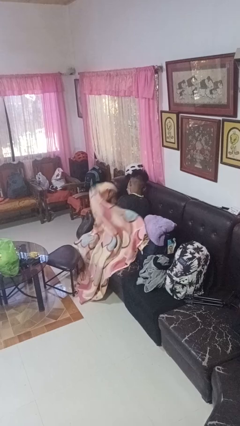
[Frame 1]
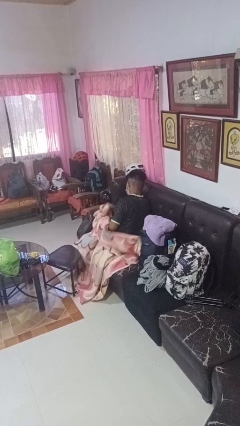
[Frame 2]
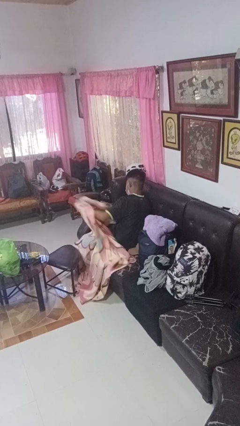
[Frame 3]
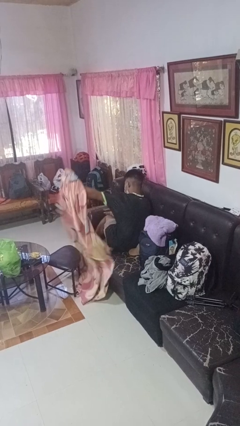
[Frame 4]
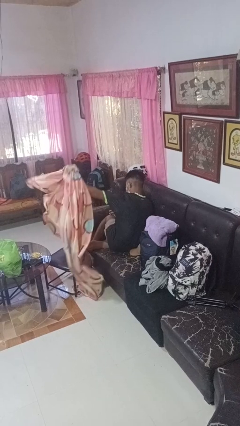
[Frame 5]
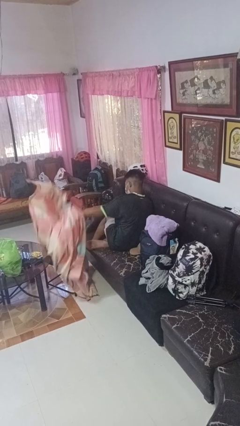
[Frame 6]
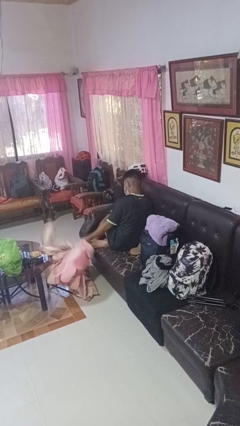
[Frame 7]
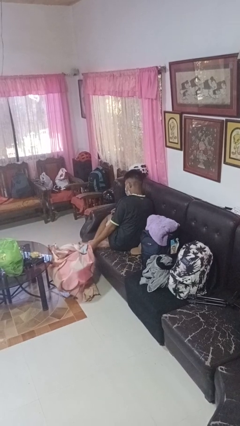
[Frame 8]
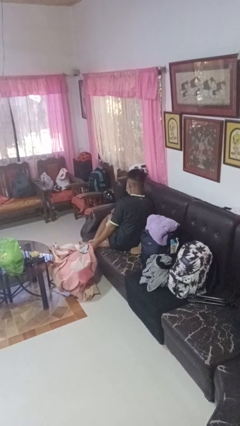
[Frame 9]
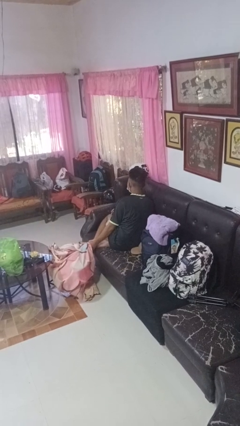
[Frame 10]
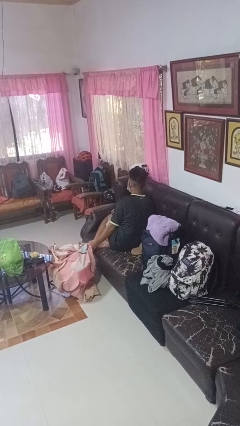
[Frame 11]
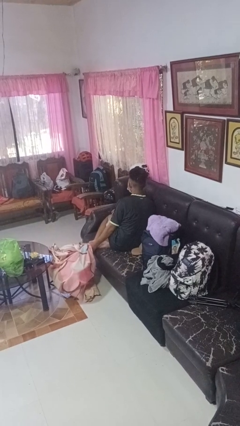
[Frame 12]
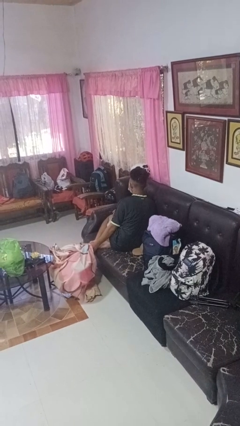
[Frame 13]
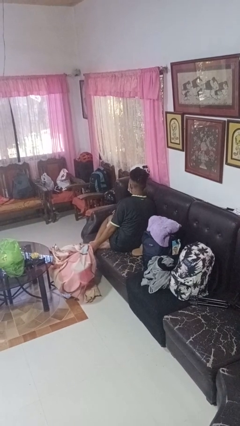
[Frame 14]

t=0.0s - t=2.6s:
person uncovers with blanket

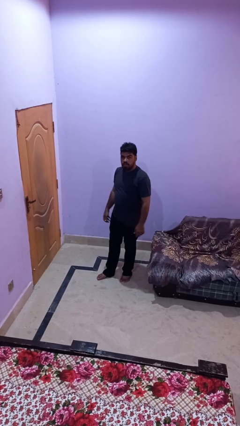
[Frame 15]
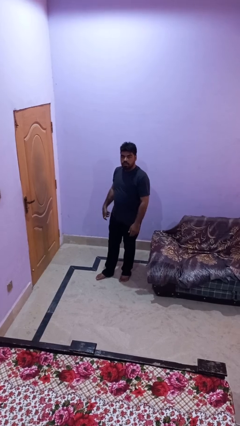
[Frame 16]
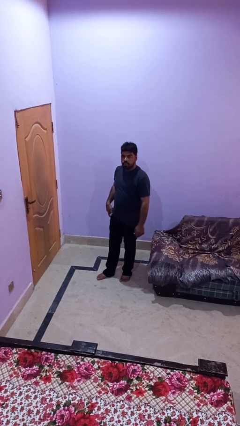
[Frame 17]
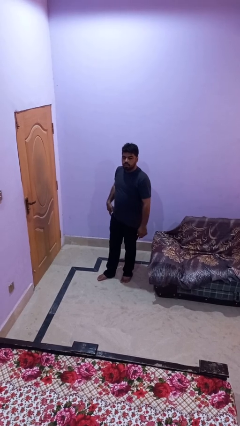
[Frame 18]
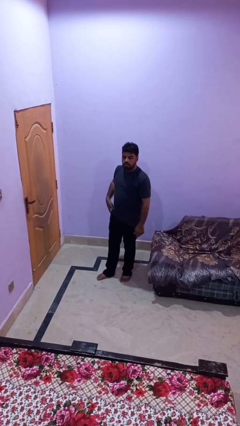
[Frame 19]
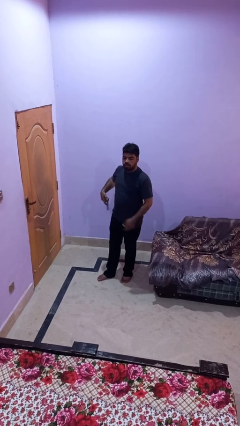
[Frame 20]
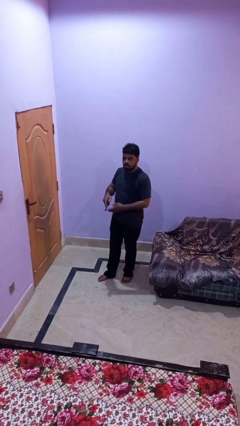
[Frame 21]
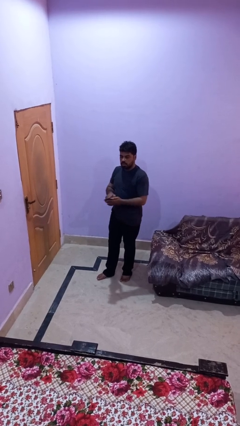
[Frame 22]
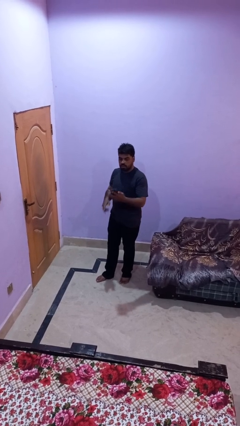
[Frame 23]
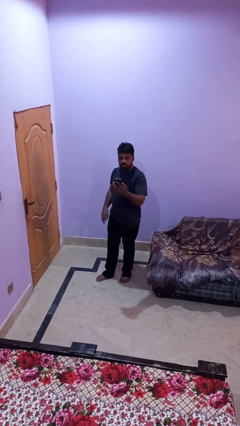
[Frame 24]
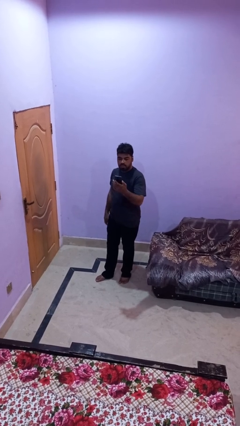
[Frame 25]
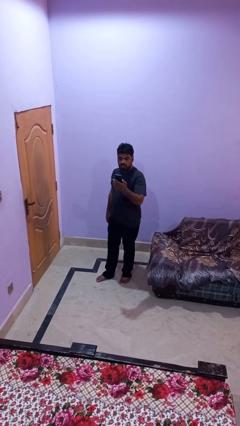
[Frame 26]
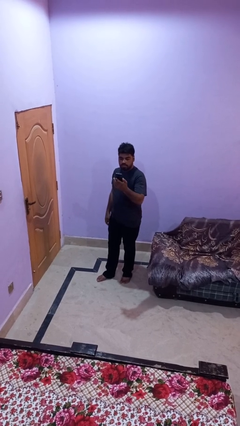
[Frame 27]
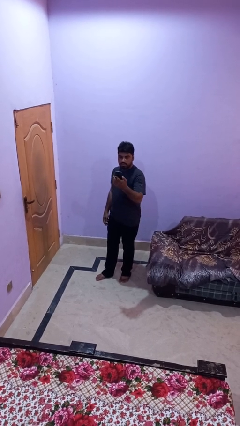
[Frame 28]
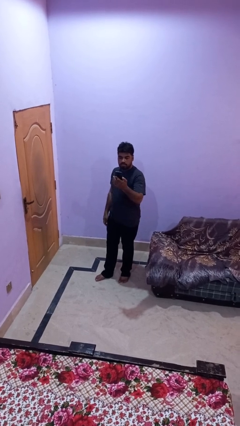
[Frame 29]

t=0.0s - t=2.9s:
person takes phone from pocket

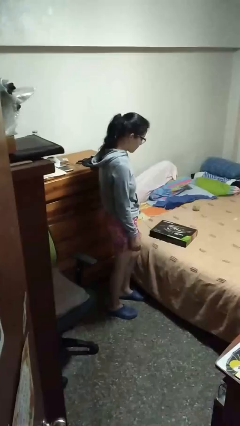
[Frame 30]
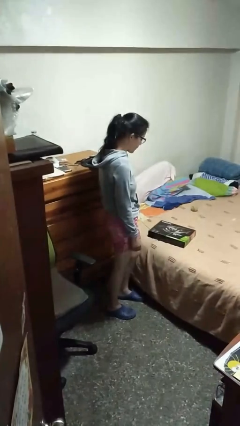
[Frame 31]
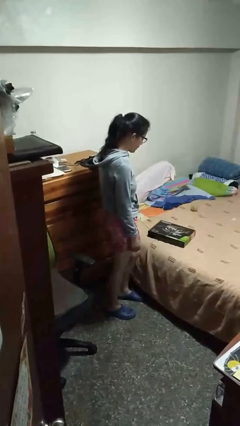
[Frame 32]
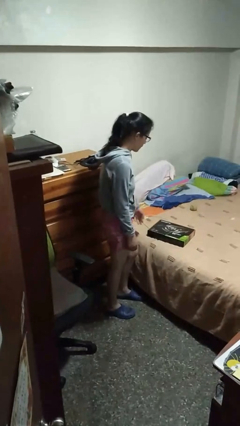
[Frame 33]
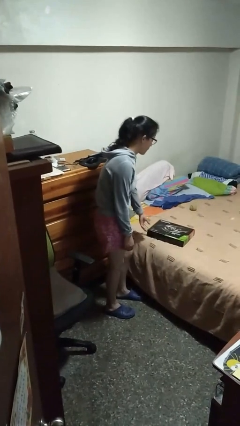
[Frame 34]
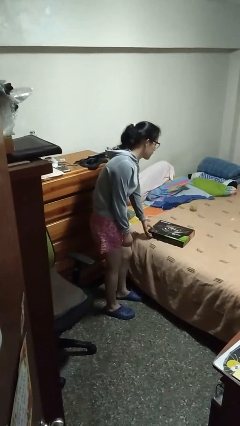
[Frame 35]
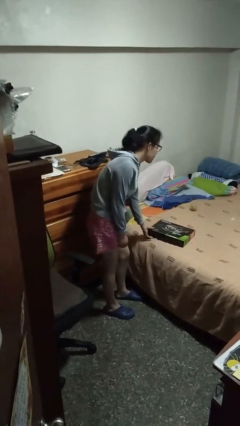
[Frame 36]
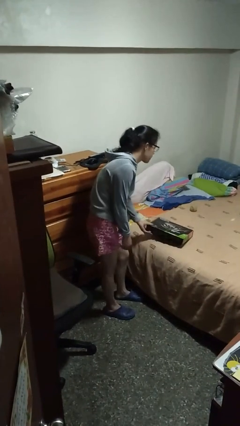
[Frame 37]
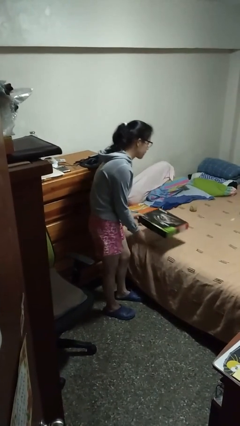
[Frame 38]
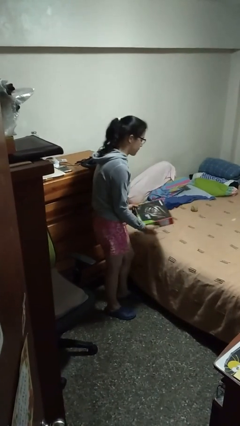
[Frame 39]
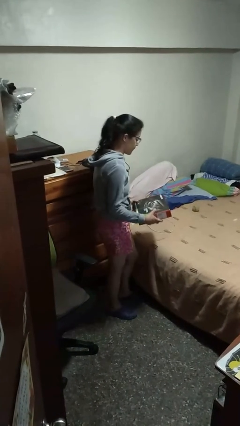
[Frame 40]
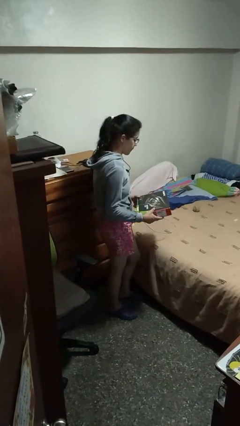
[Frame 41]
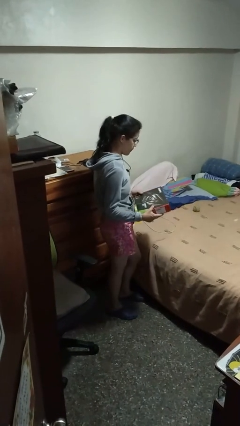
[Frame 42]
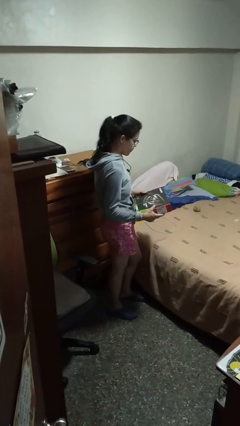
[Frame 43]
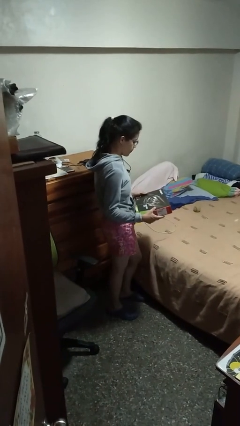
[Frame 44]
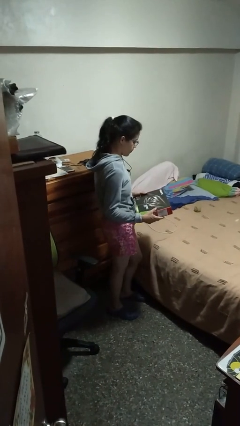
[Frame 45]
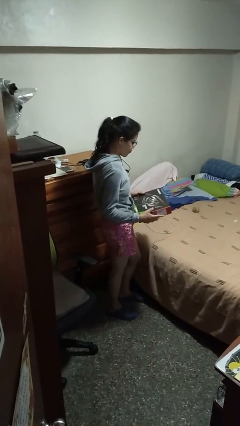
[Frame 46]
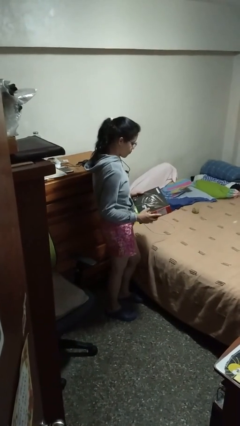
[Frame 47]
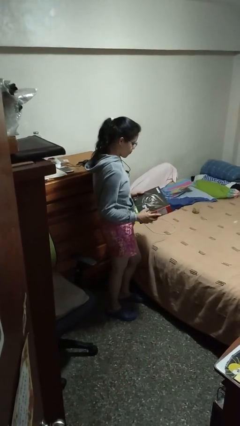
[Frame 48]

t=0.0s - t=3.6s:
person picks up object from bed

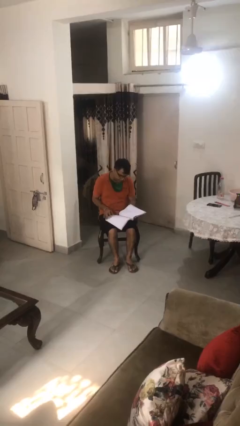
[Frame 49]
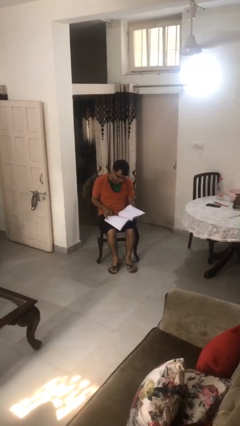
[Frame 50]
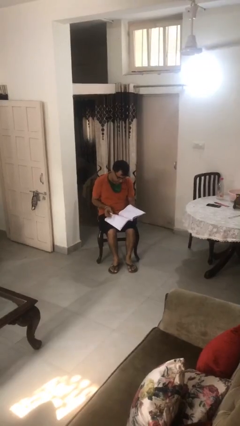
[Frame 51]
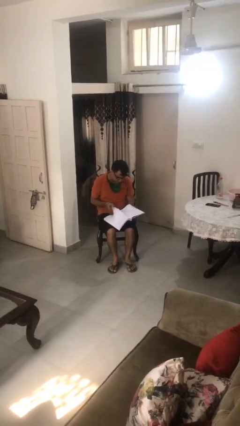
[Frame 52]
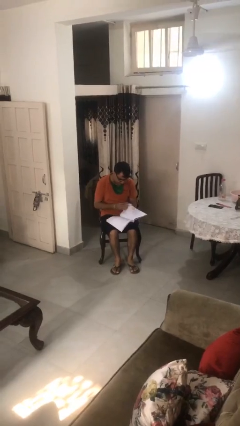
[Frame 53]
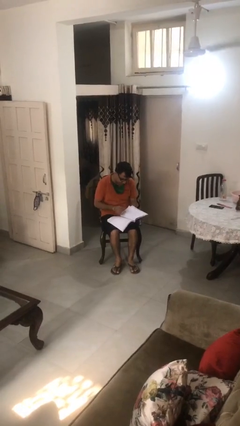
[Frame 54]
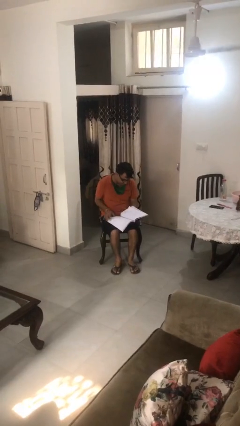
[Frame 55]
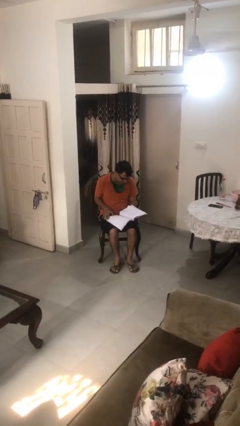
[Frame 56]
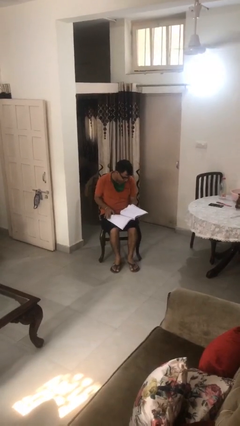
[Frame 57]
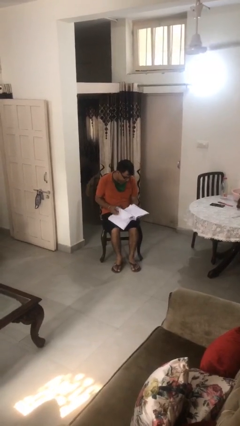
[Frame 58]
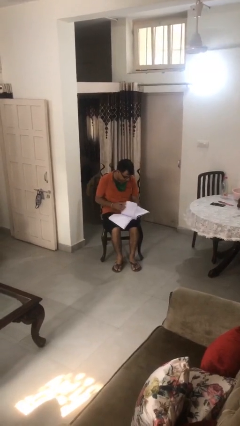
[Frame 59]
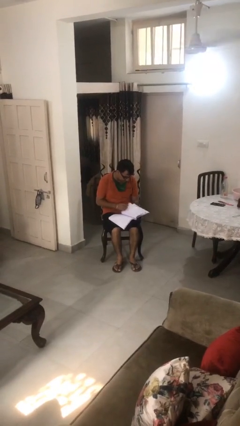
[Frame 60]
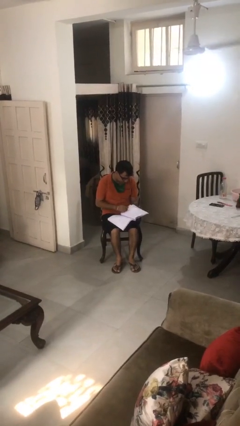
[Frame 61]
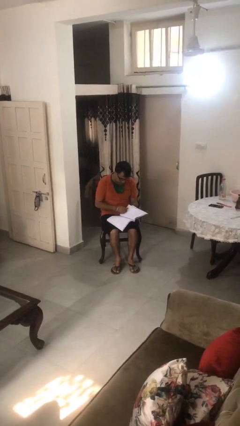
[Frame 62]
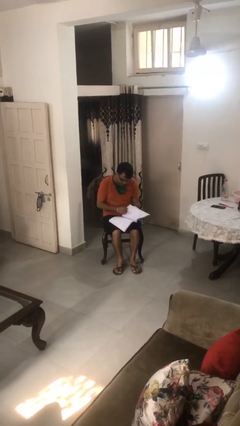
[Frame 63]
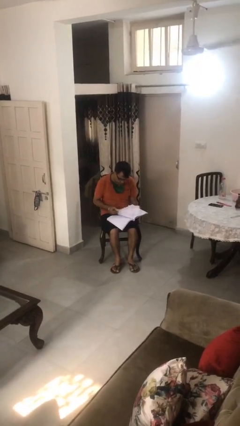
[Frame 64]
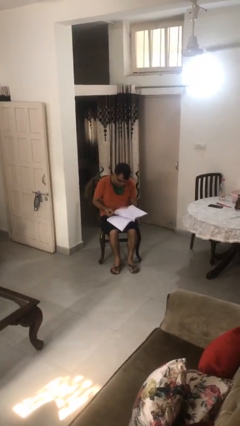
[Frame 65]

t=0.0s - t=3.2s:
person reads document

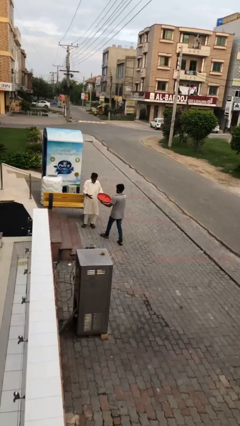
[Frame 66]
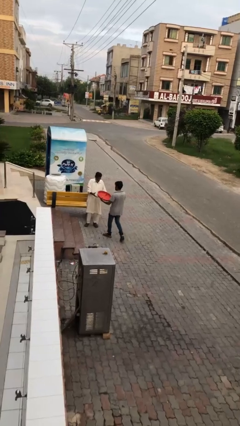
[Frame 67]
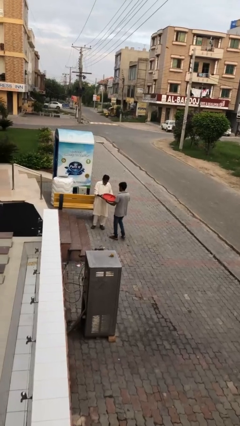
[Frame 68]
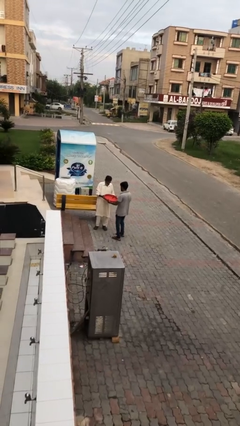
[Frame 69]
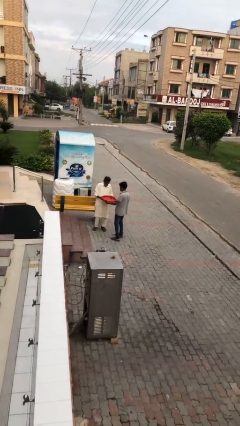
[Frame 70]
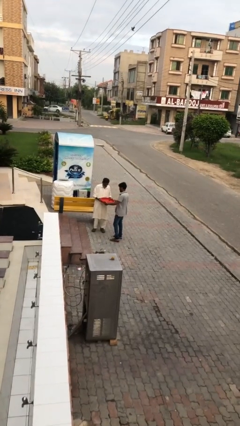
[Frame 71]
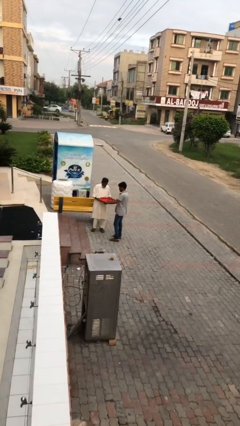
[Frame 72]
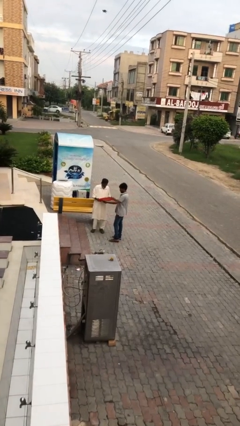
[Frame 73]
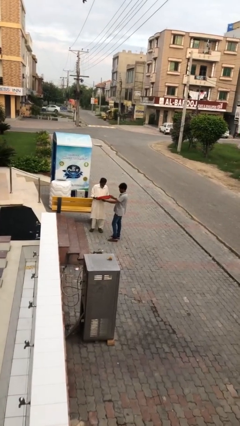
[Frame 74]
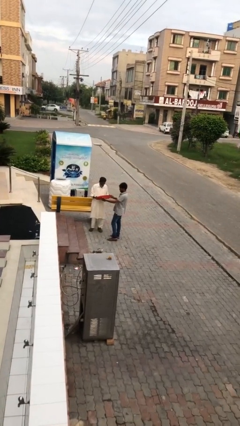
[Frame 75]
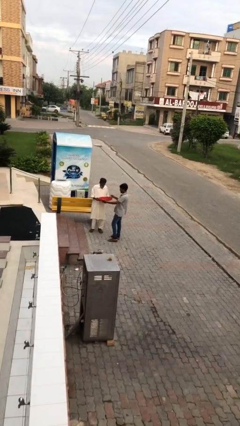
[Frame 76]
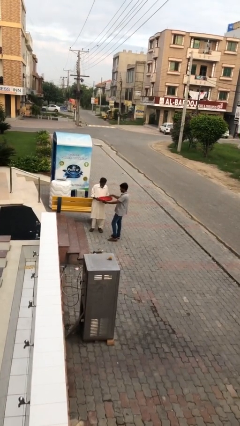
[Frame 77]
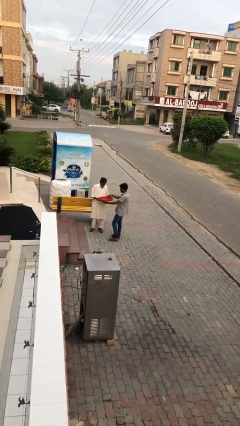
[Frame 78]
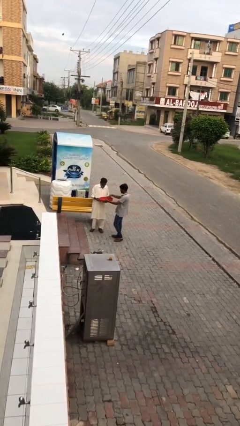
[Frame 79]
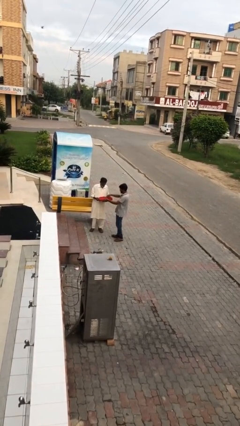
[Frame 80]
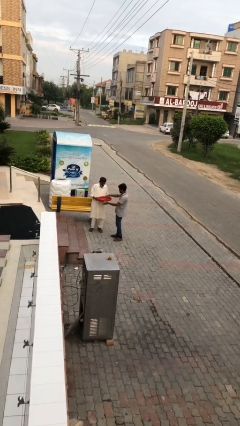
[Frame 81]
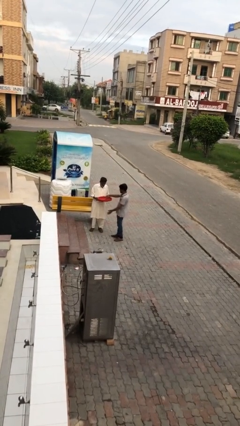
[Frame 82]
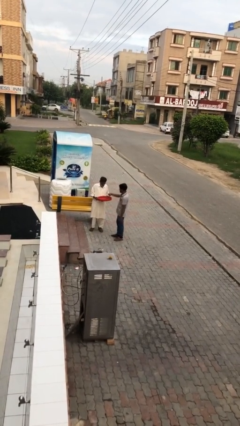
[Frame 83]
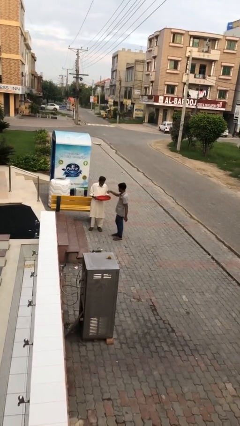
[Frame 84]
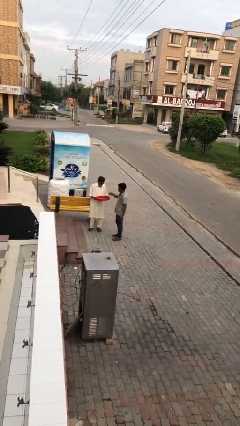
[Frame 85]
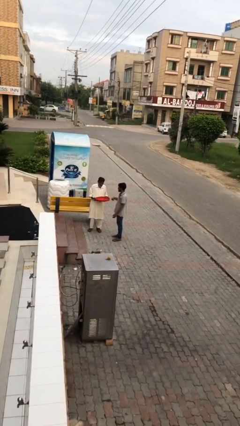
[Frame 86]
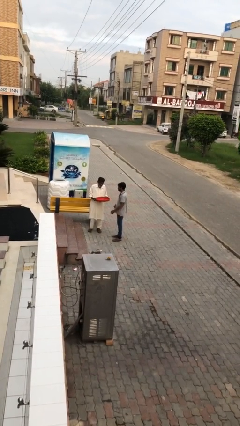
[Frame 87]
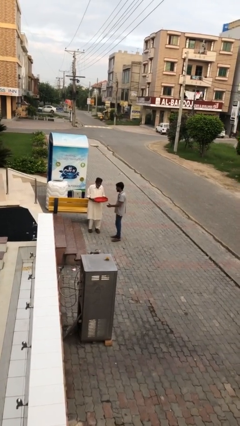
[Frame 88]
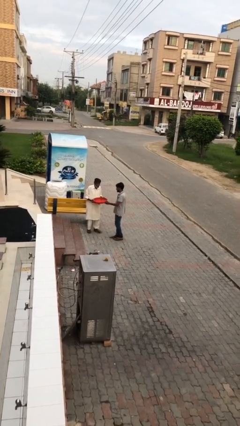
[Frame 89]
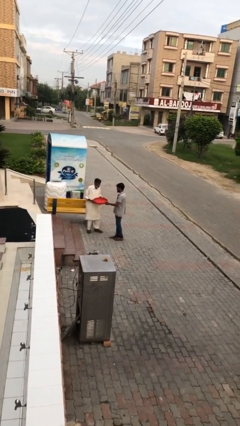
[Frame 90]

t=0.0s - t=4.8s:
person transfers object to person
